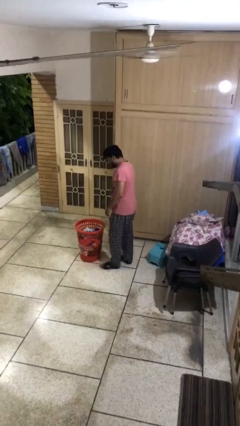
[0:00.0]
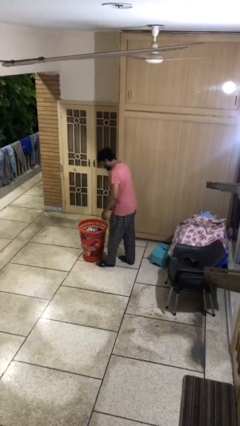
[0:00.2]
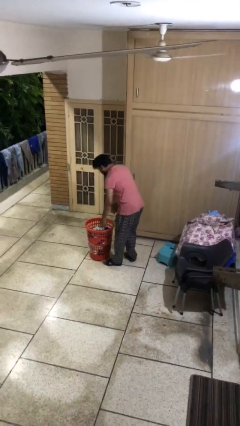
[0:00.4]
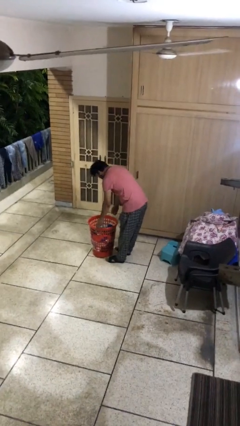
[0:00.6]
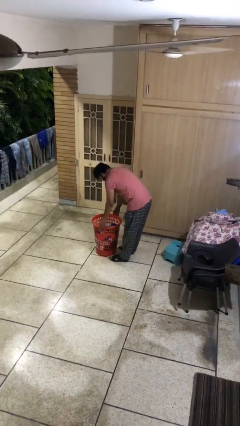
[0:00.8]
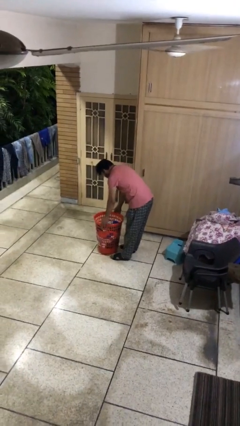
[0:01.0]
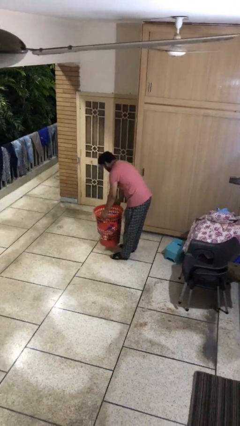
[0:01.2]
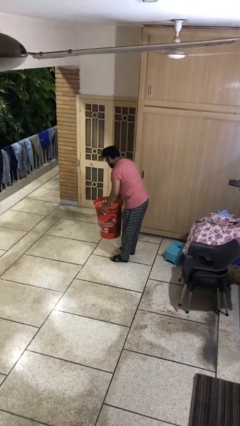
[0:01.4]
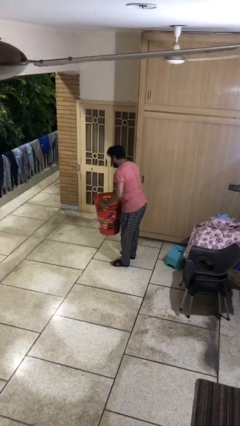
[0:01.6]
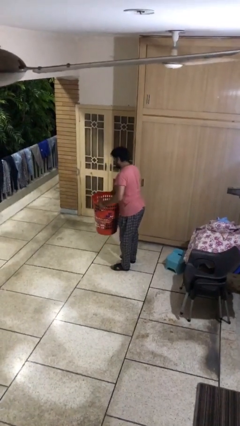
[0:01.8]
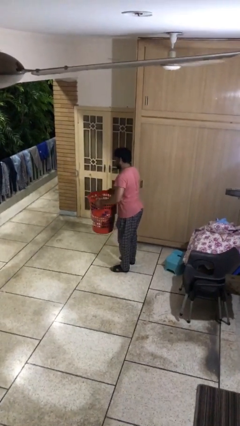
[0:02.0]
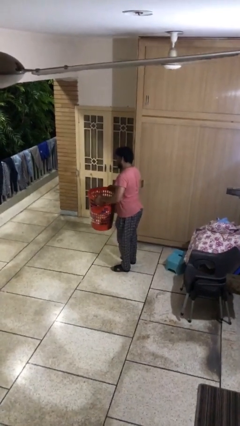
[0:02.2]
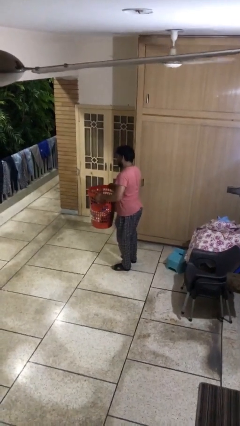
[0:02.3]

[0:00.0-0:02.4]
person picks up object from floor

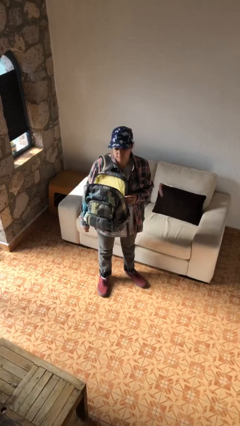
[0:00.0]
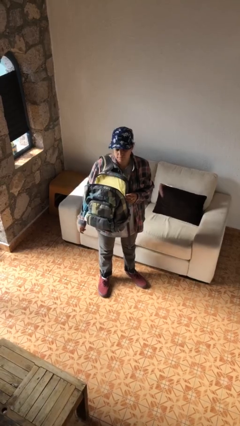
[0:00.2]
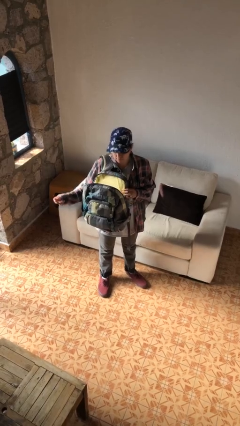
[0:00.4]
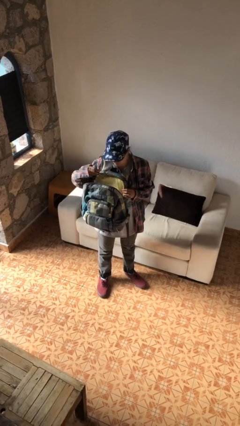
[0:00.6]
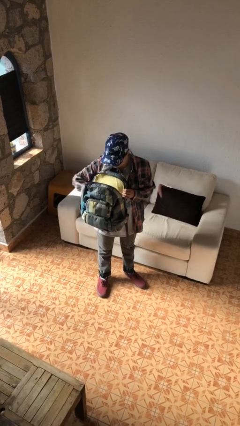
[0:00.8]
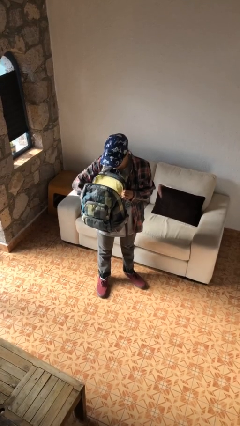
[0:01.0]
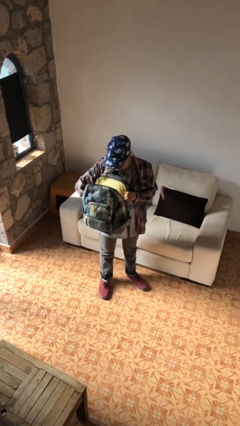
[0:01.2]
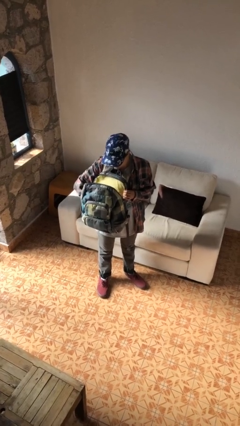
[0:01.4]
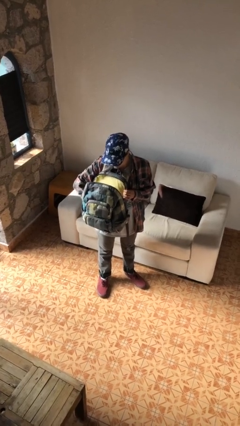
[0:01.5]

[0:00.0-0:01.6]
person searches in backpack

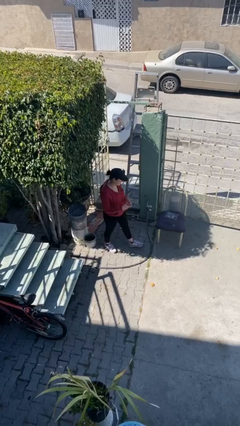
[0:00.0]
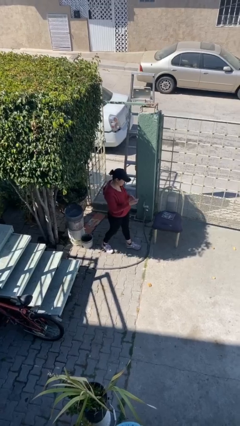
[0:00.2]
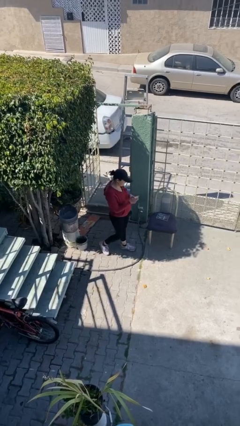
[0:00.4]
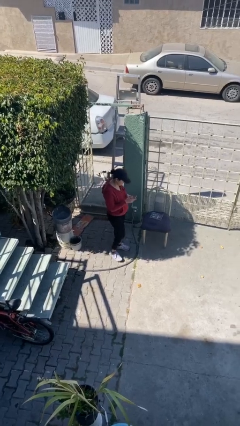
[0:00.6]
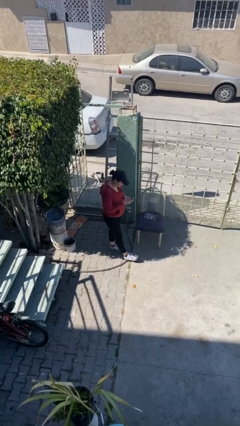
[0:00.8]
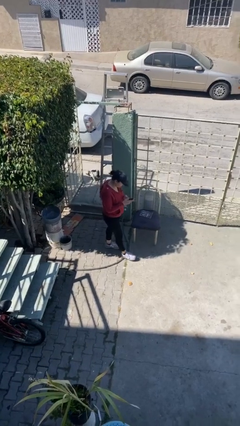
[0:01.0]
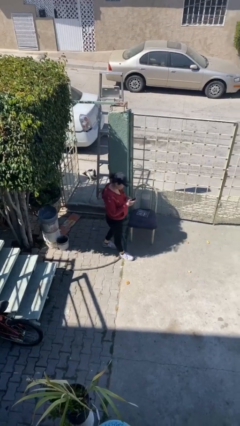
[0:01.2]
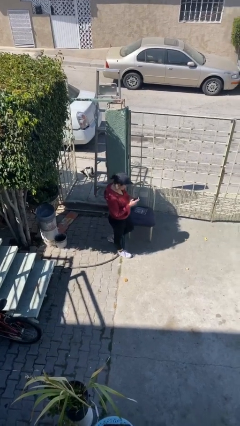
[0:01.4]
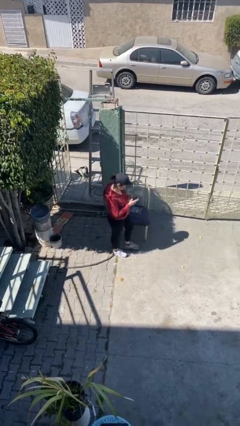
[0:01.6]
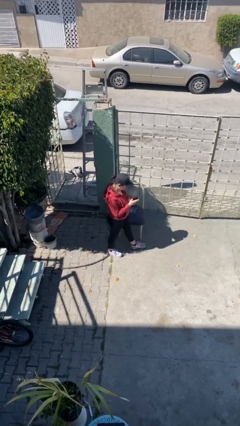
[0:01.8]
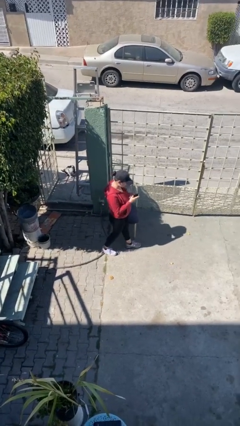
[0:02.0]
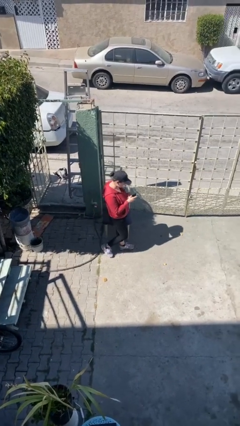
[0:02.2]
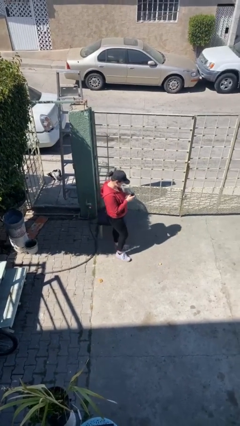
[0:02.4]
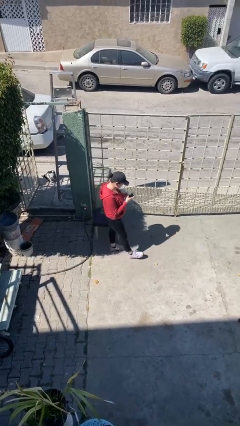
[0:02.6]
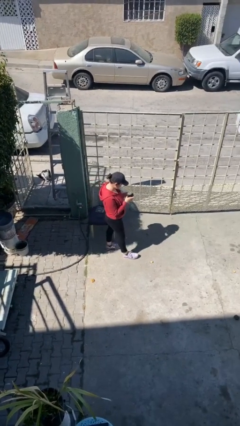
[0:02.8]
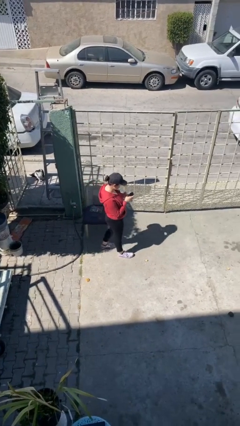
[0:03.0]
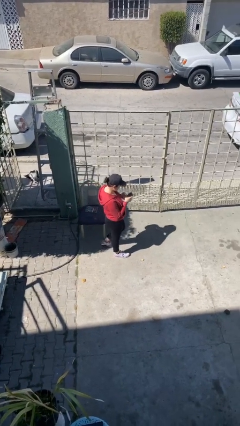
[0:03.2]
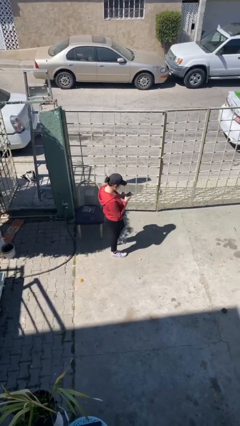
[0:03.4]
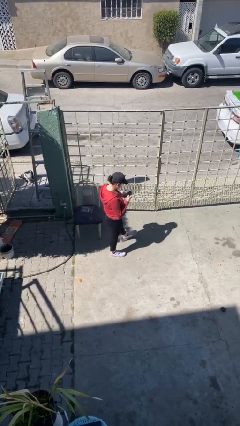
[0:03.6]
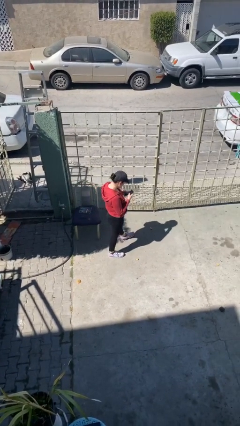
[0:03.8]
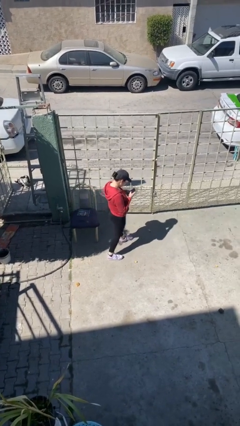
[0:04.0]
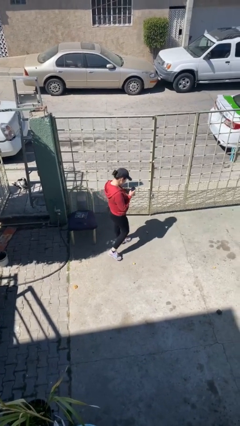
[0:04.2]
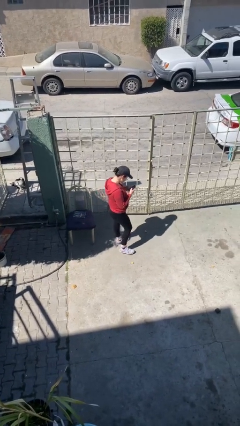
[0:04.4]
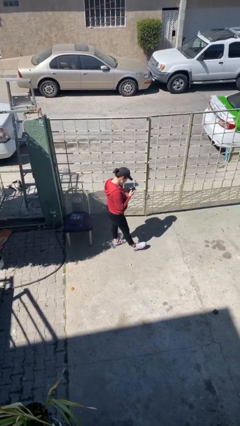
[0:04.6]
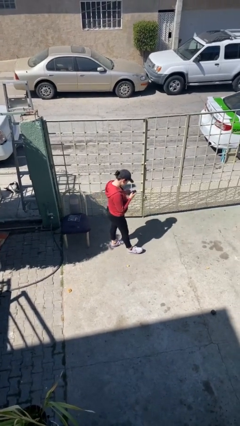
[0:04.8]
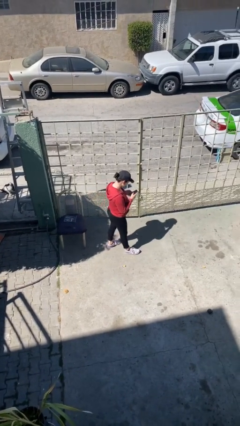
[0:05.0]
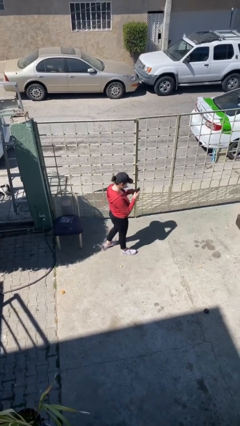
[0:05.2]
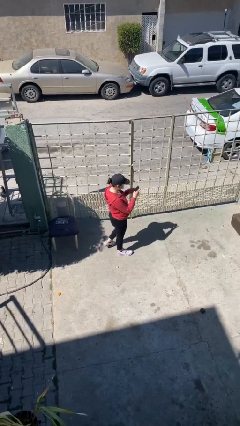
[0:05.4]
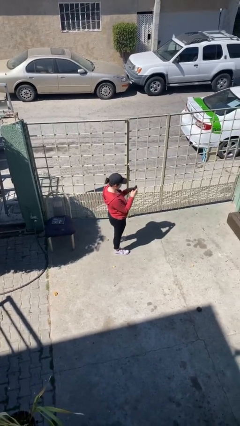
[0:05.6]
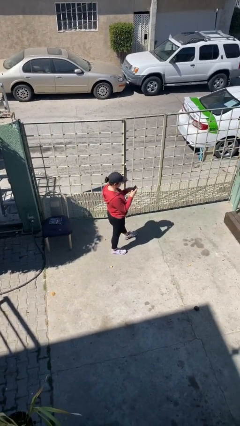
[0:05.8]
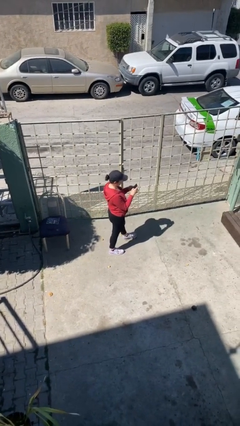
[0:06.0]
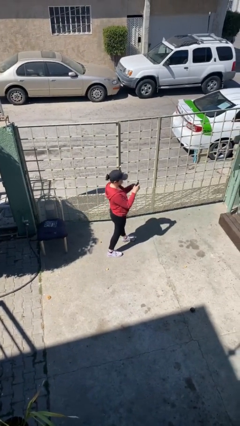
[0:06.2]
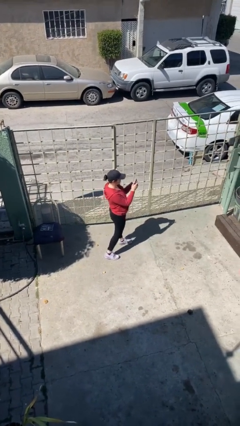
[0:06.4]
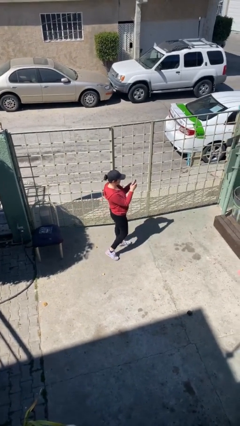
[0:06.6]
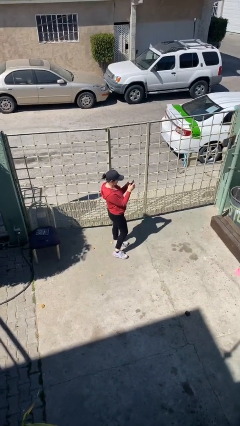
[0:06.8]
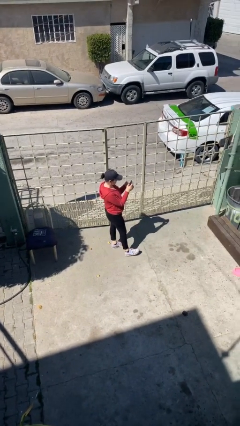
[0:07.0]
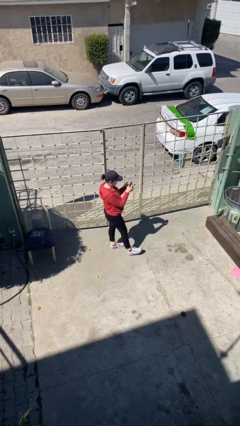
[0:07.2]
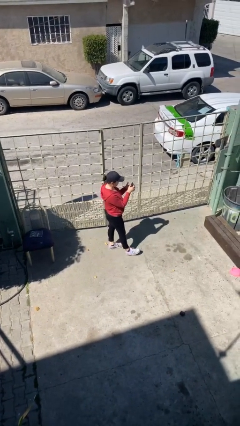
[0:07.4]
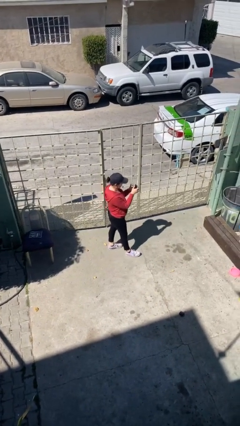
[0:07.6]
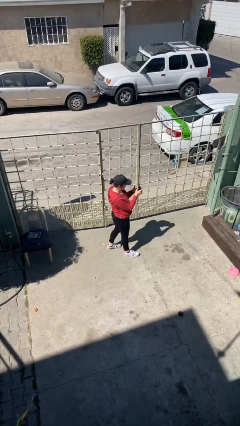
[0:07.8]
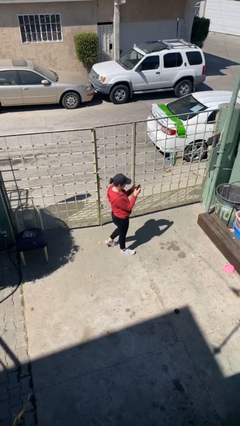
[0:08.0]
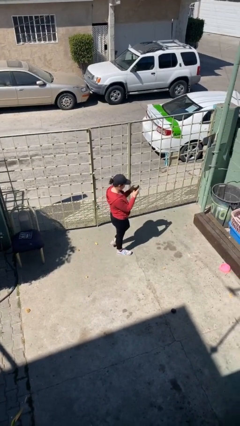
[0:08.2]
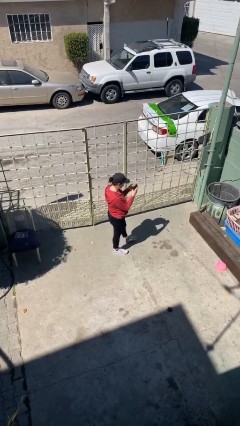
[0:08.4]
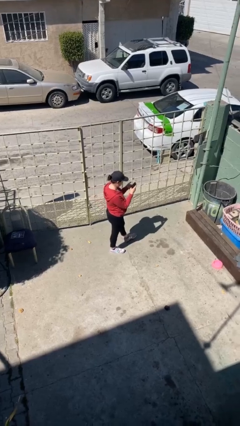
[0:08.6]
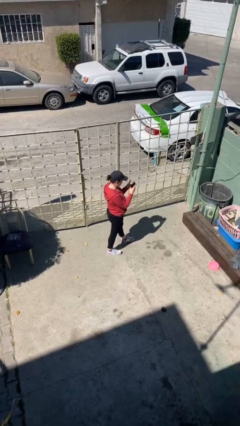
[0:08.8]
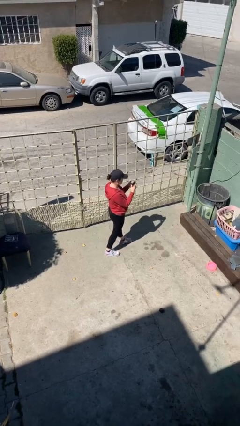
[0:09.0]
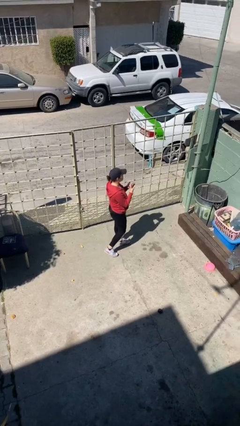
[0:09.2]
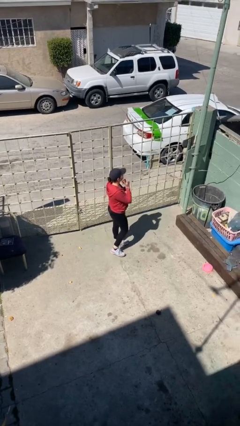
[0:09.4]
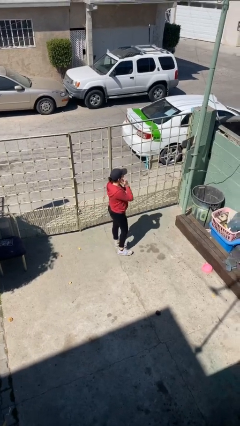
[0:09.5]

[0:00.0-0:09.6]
person texts on phone

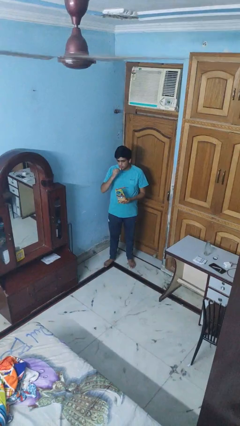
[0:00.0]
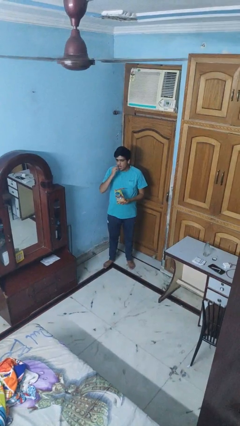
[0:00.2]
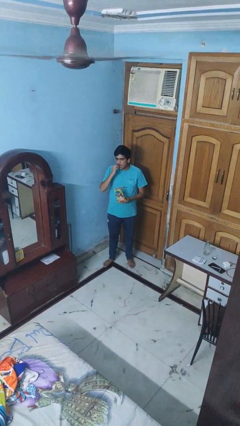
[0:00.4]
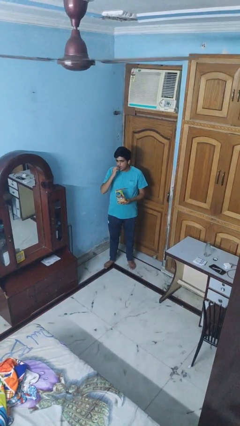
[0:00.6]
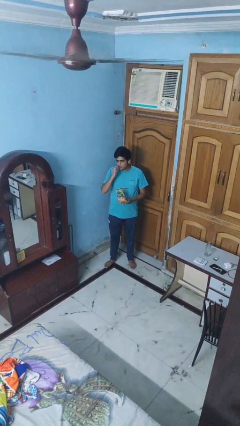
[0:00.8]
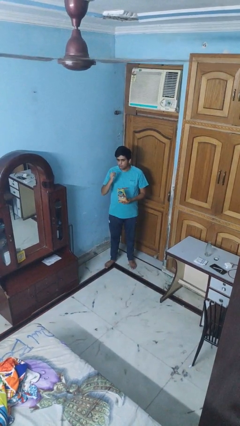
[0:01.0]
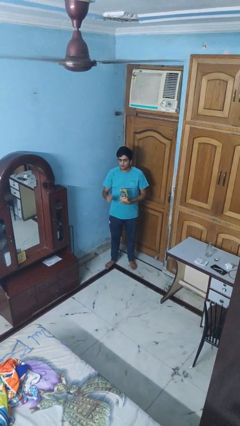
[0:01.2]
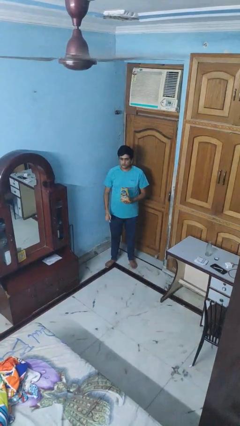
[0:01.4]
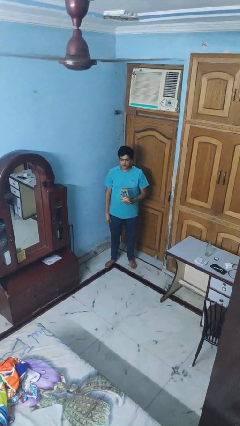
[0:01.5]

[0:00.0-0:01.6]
person eats snack from bag

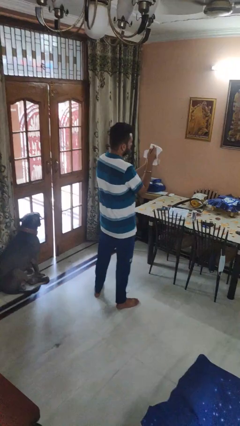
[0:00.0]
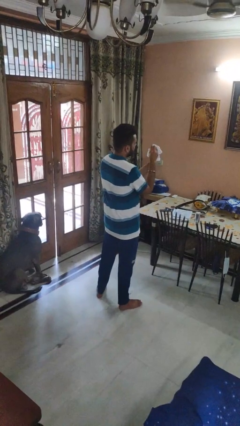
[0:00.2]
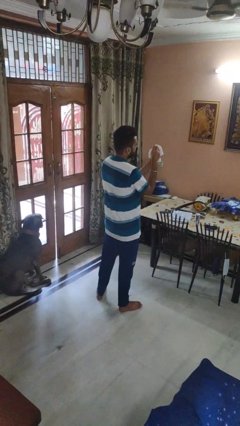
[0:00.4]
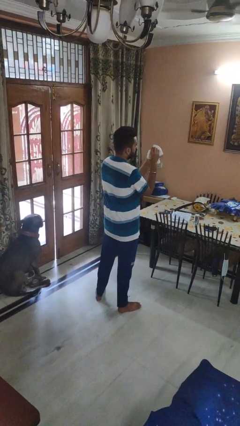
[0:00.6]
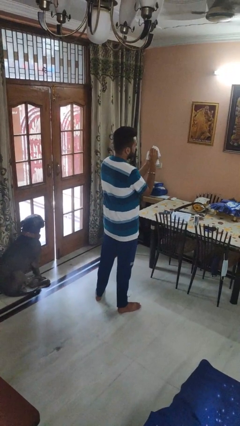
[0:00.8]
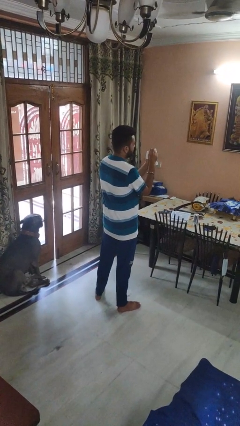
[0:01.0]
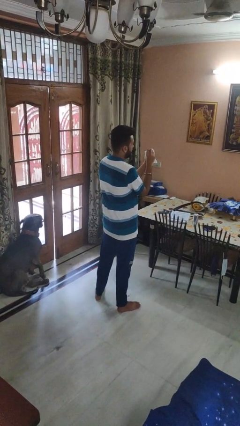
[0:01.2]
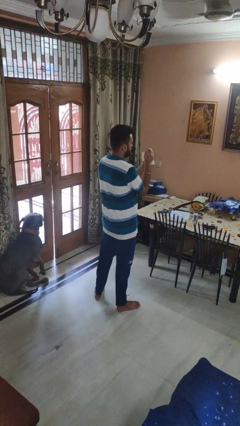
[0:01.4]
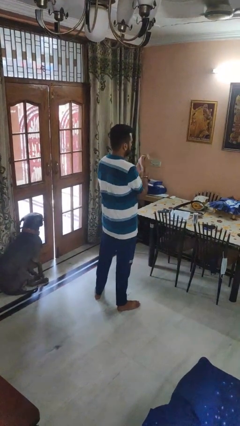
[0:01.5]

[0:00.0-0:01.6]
person crumples paper

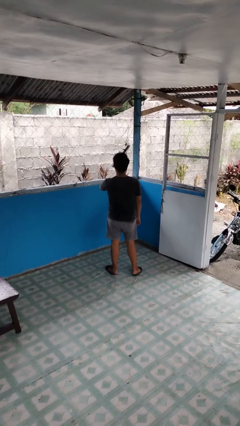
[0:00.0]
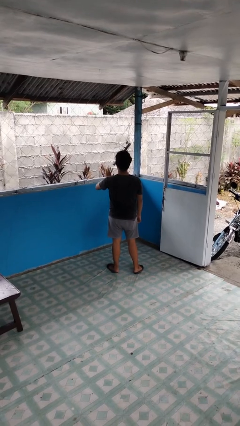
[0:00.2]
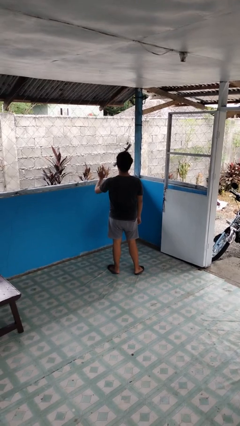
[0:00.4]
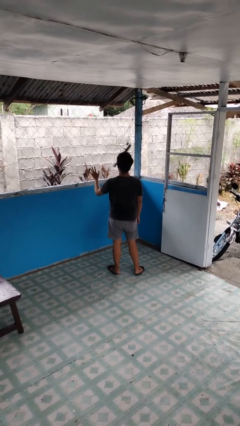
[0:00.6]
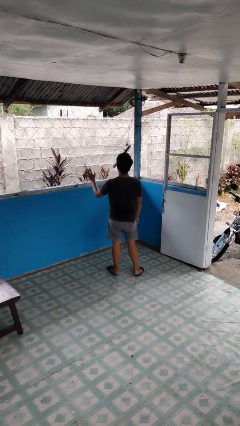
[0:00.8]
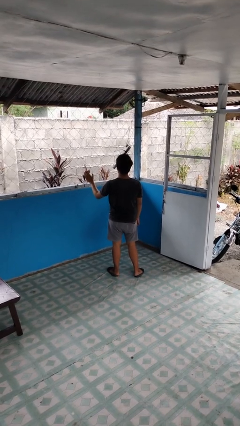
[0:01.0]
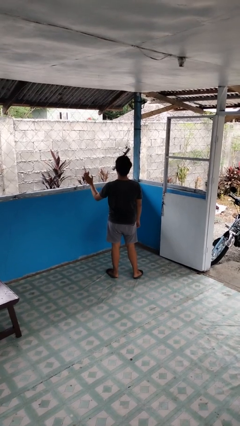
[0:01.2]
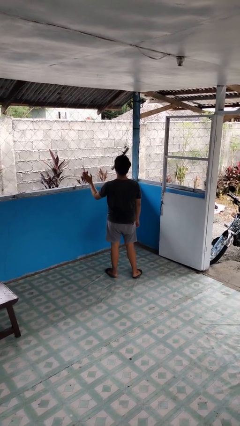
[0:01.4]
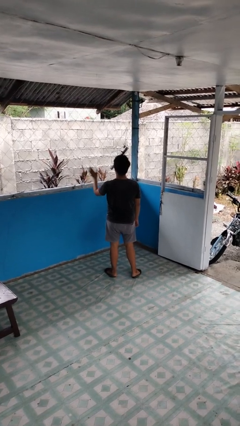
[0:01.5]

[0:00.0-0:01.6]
person gestures swipe left
